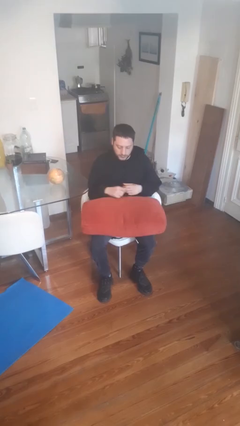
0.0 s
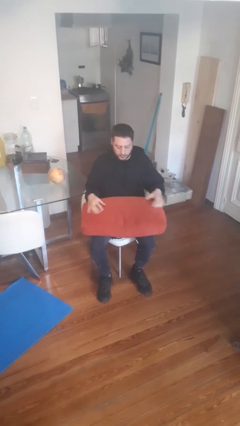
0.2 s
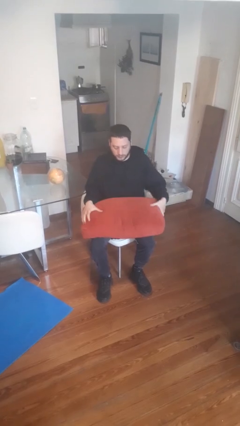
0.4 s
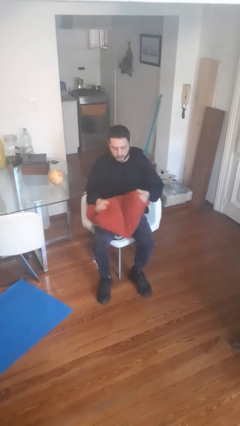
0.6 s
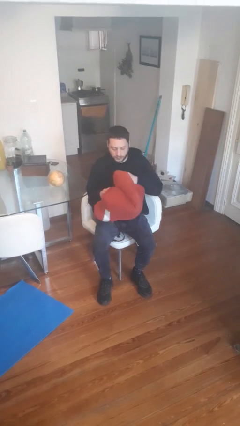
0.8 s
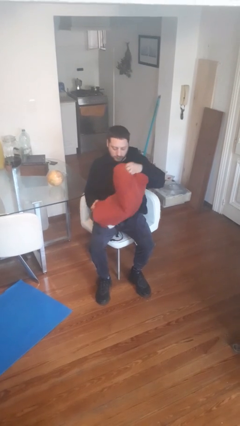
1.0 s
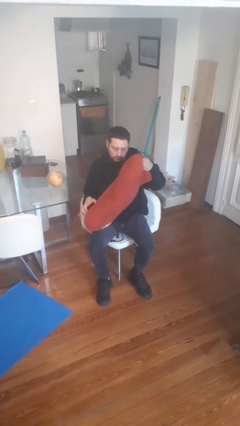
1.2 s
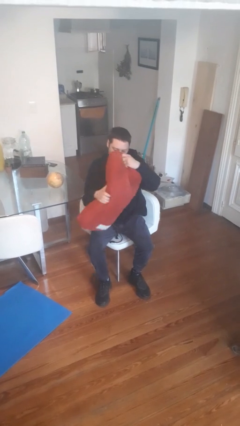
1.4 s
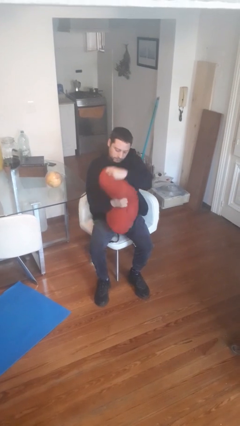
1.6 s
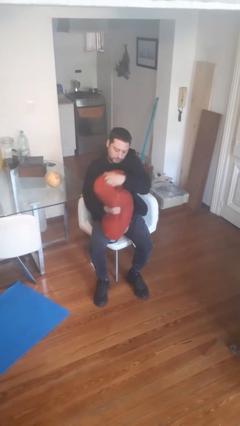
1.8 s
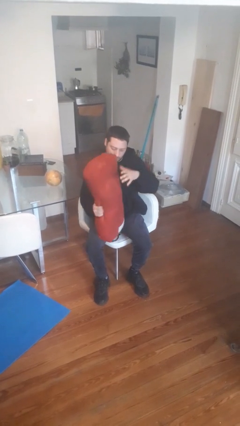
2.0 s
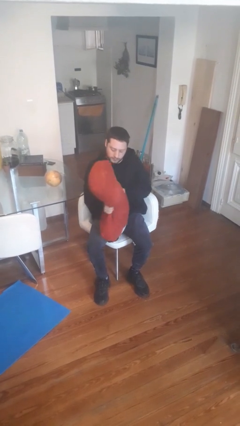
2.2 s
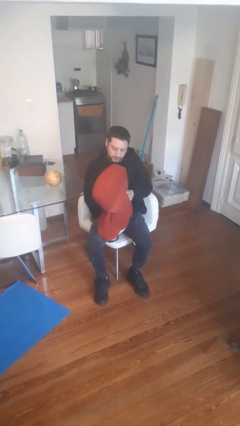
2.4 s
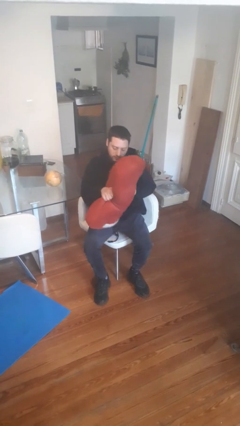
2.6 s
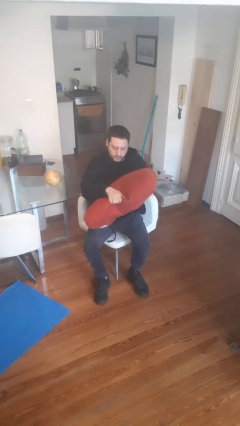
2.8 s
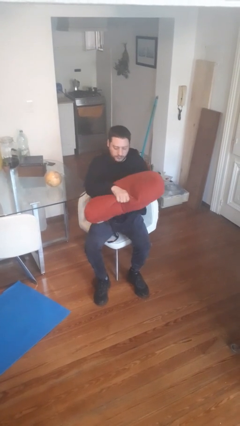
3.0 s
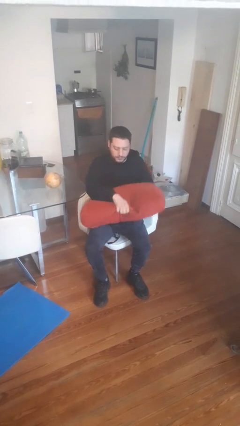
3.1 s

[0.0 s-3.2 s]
person squeezes object

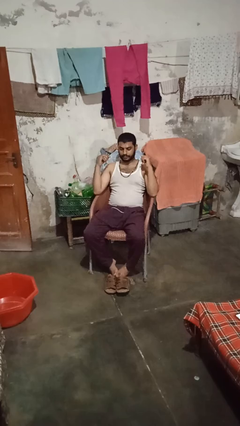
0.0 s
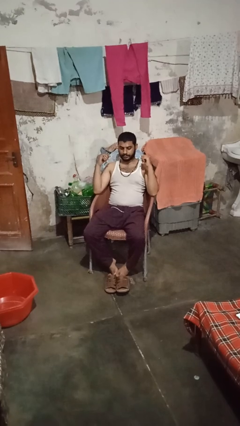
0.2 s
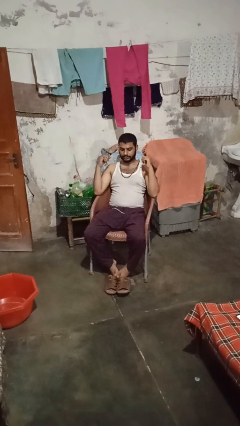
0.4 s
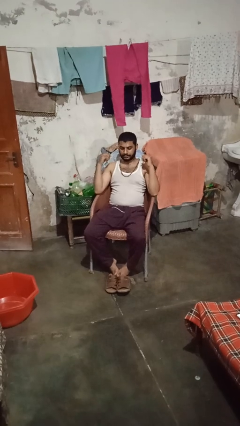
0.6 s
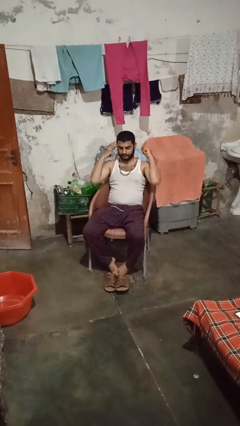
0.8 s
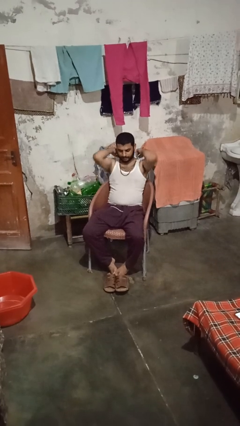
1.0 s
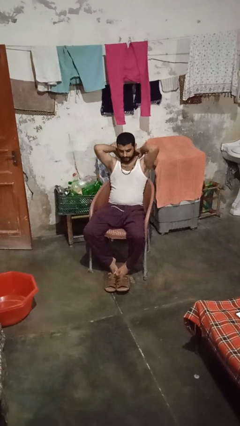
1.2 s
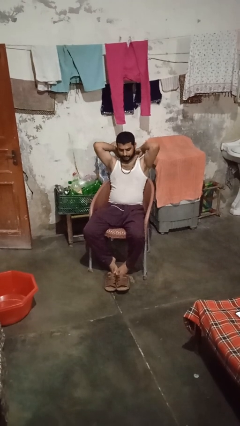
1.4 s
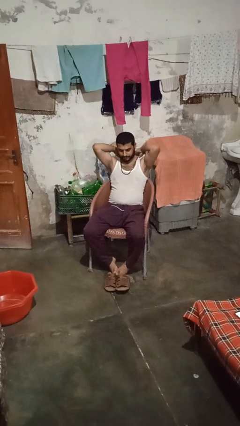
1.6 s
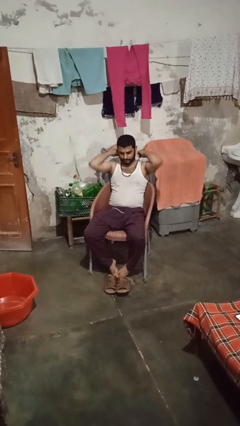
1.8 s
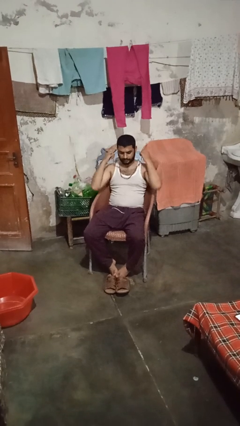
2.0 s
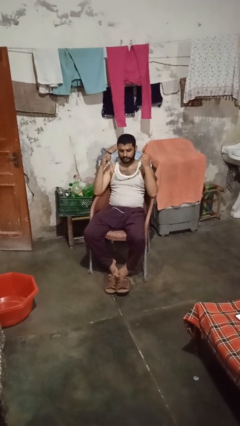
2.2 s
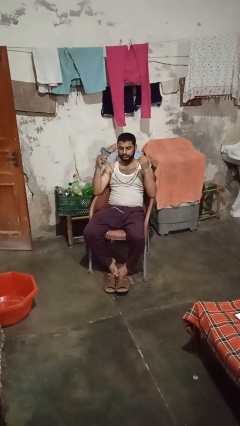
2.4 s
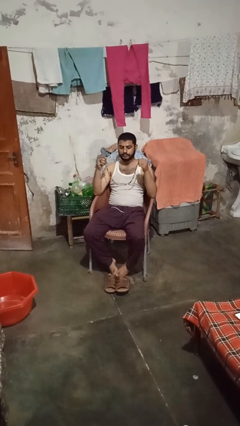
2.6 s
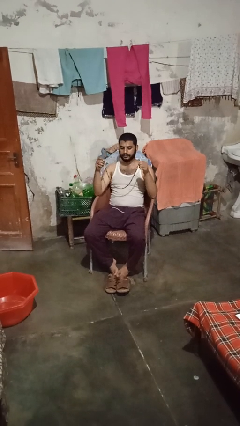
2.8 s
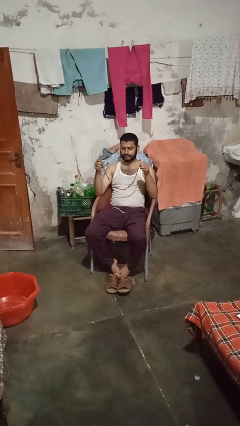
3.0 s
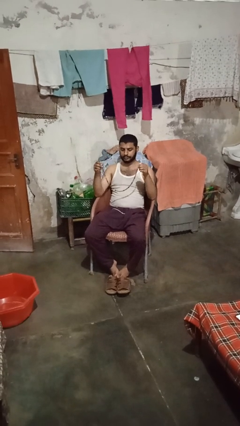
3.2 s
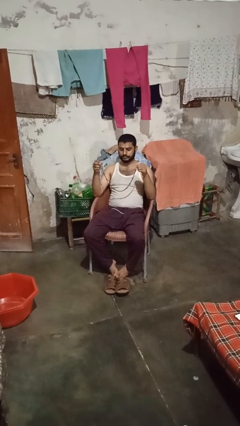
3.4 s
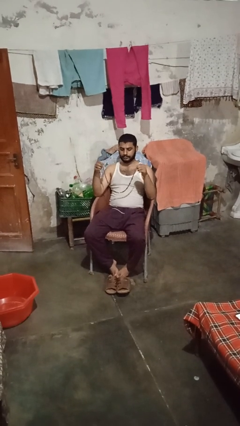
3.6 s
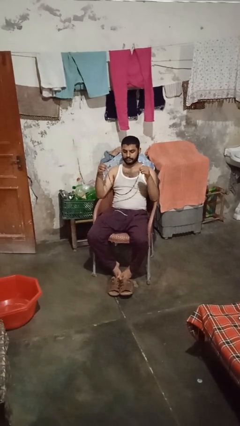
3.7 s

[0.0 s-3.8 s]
person takes off necklace

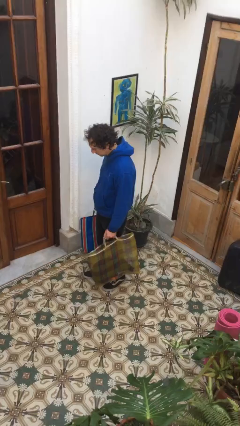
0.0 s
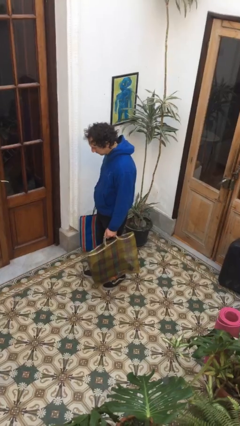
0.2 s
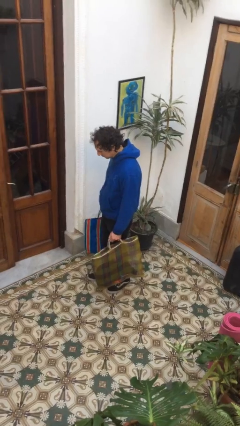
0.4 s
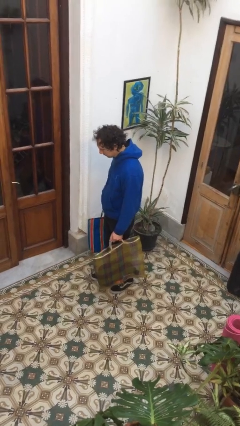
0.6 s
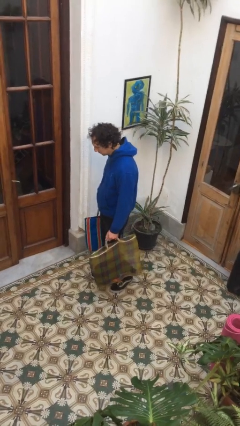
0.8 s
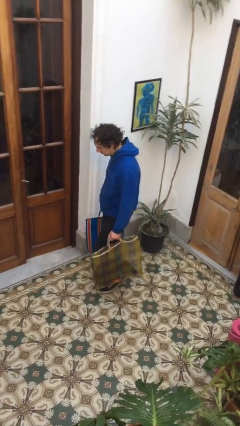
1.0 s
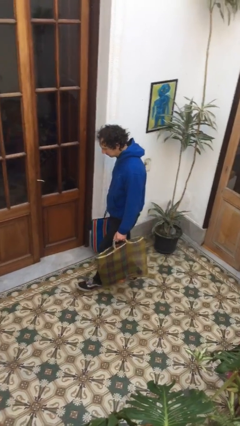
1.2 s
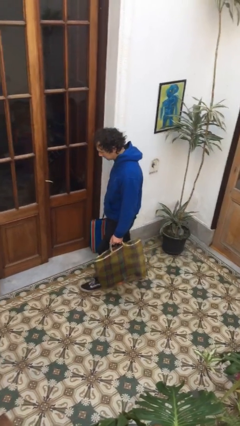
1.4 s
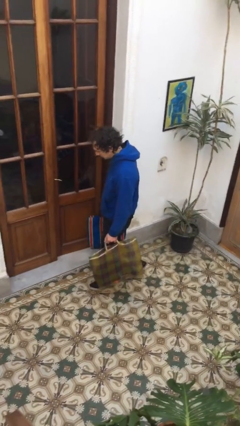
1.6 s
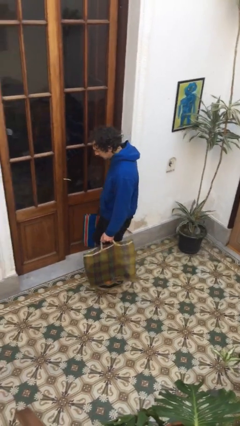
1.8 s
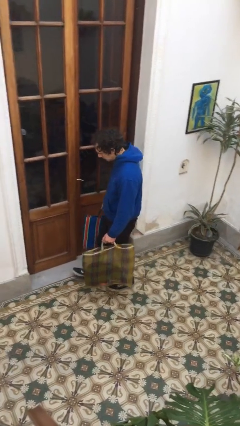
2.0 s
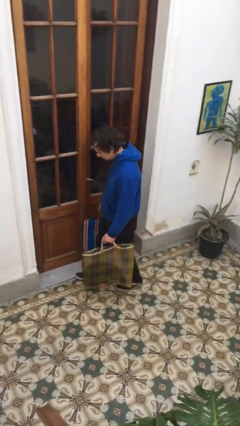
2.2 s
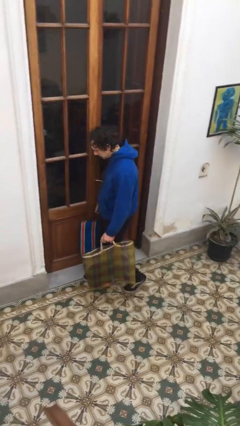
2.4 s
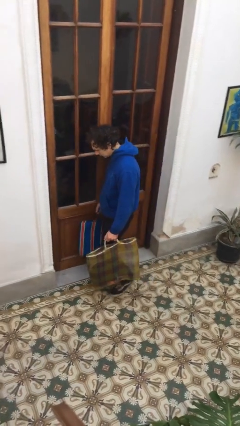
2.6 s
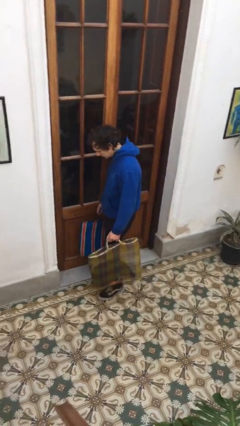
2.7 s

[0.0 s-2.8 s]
person carries groceries

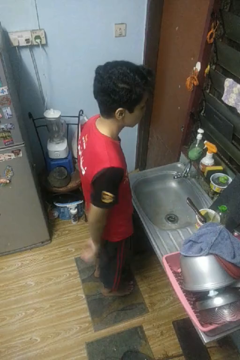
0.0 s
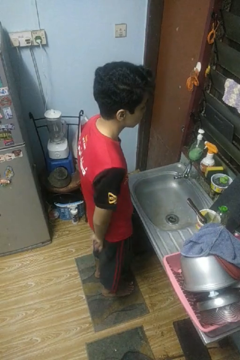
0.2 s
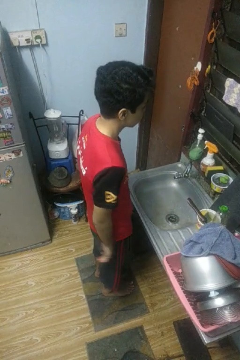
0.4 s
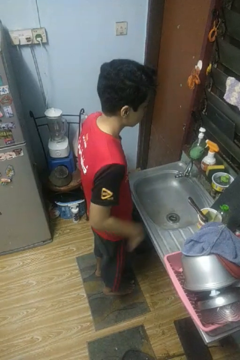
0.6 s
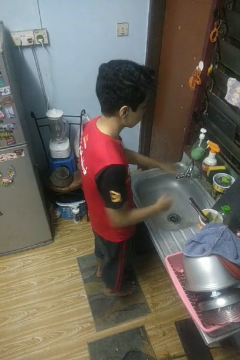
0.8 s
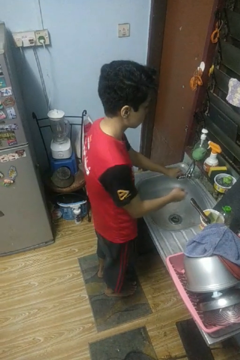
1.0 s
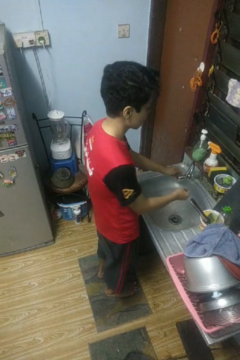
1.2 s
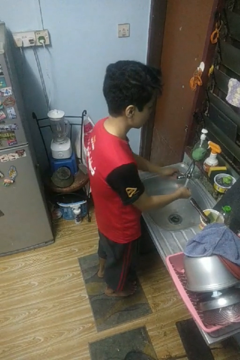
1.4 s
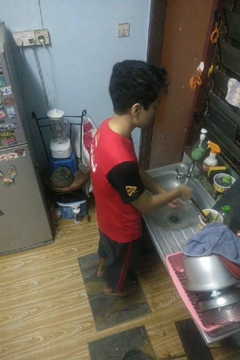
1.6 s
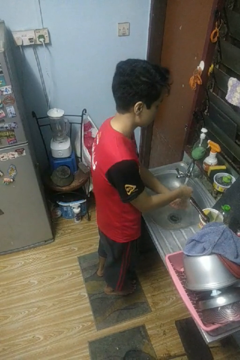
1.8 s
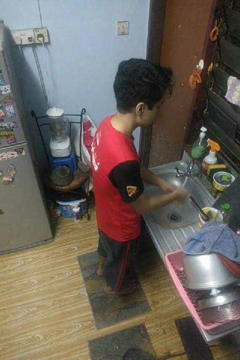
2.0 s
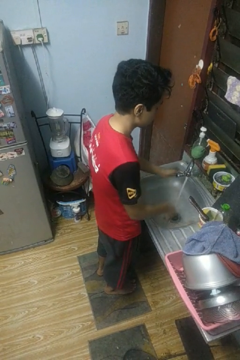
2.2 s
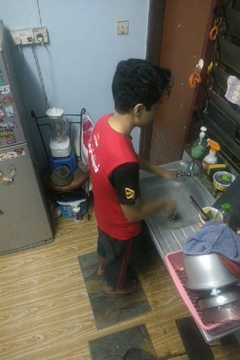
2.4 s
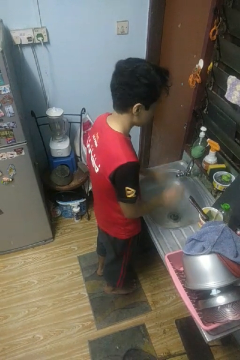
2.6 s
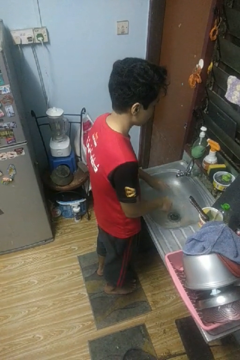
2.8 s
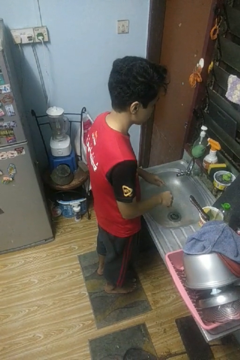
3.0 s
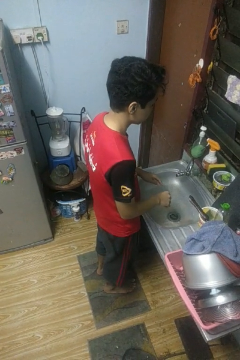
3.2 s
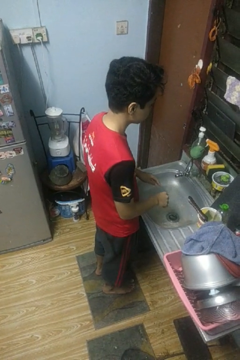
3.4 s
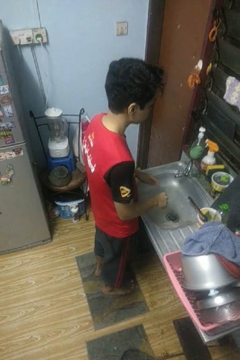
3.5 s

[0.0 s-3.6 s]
person washes hands

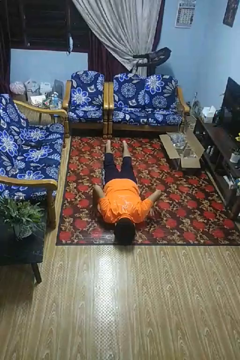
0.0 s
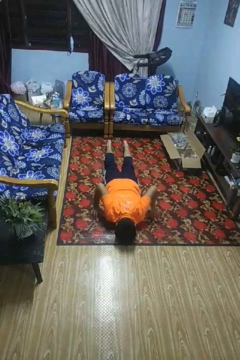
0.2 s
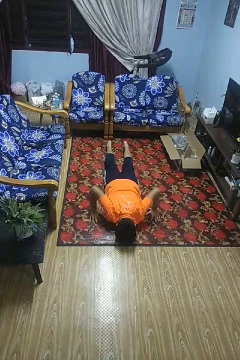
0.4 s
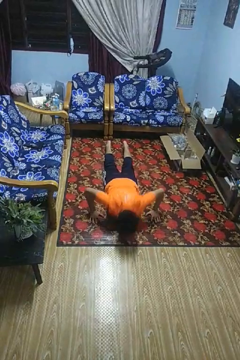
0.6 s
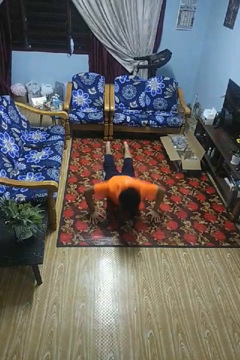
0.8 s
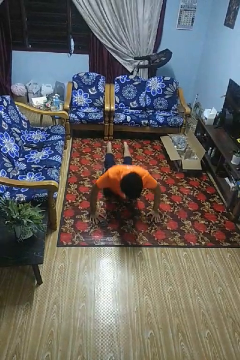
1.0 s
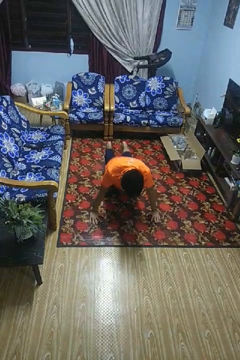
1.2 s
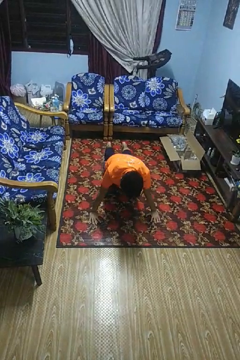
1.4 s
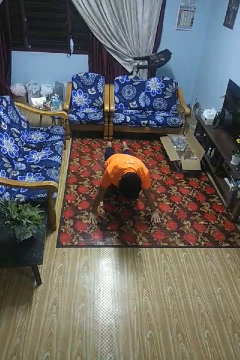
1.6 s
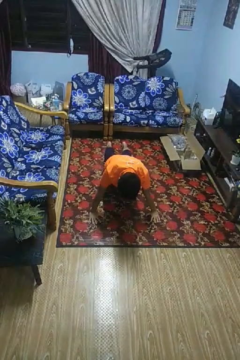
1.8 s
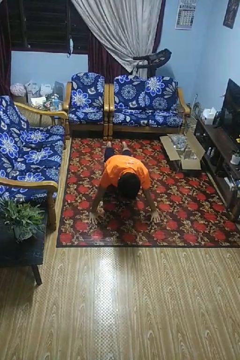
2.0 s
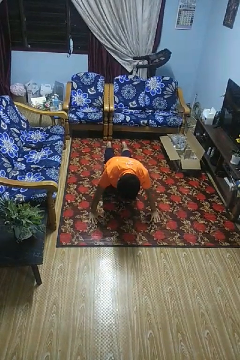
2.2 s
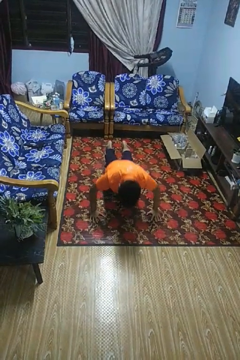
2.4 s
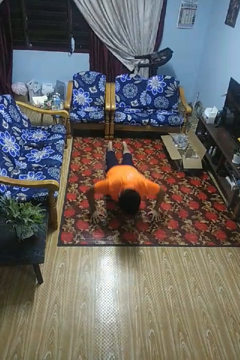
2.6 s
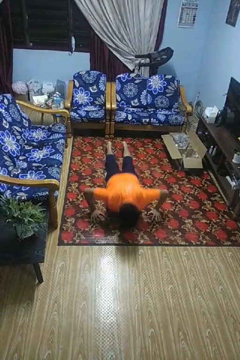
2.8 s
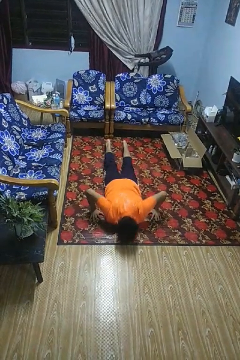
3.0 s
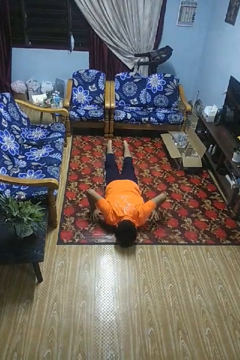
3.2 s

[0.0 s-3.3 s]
person exercises with pushup

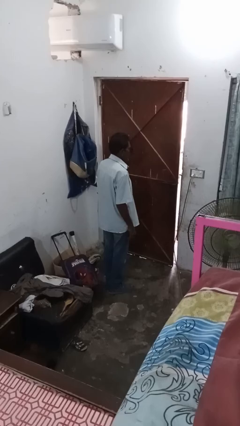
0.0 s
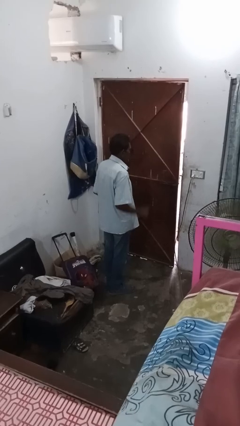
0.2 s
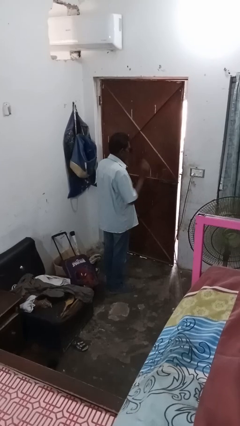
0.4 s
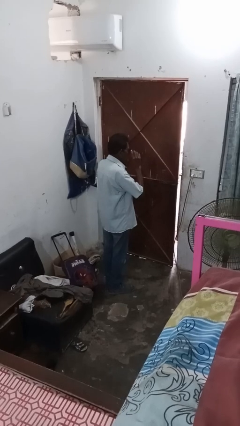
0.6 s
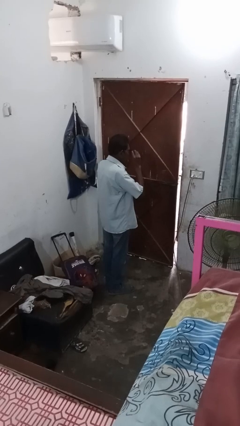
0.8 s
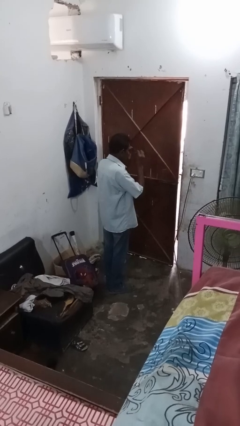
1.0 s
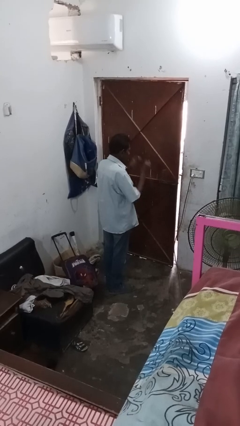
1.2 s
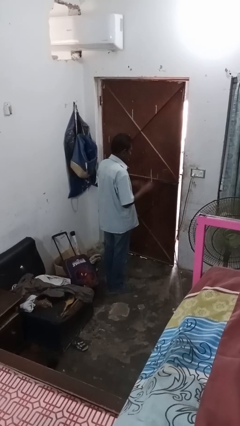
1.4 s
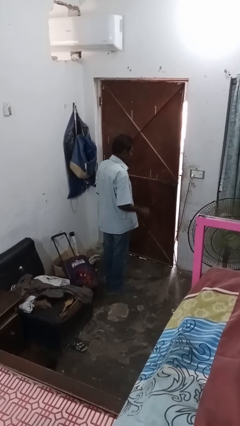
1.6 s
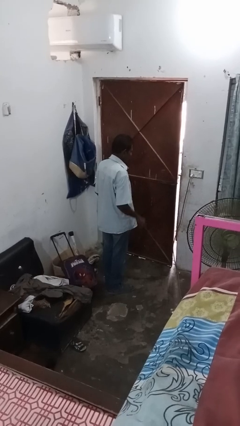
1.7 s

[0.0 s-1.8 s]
person takes off sunglasses

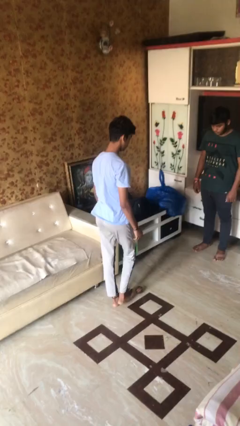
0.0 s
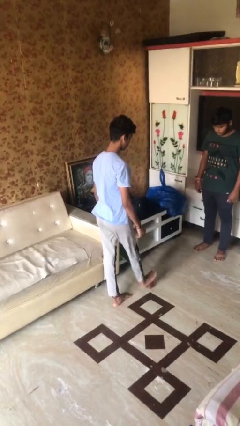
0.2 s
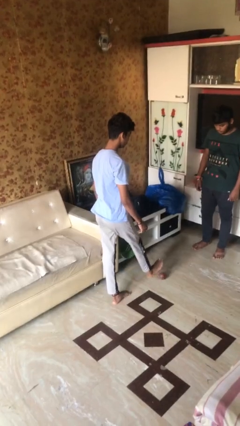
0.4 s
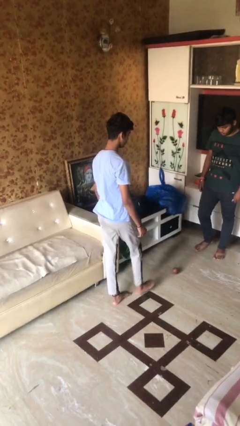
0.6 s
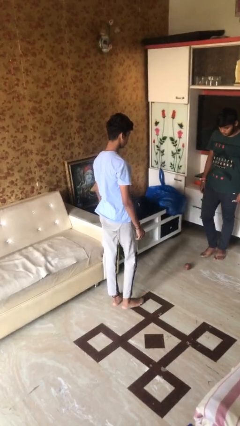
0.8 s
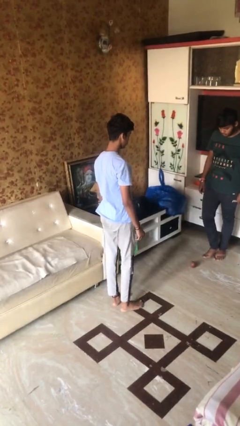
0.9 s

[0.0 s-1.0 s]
person kicks object to person
